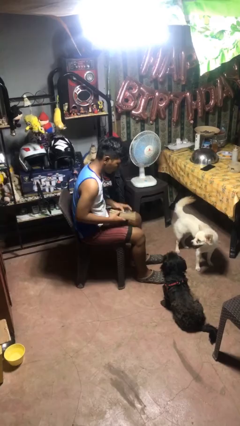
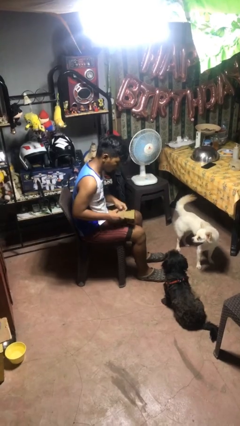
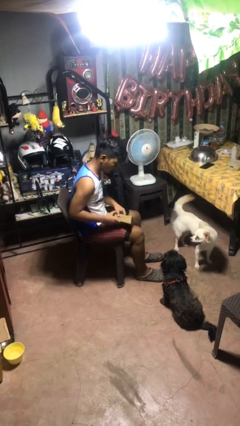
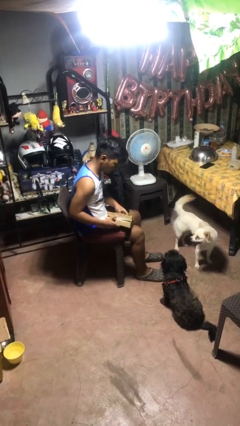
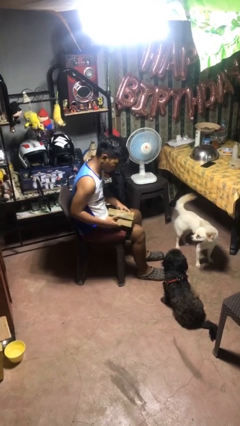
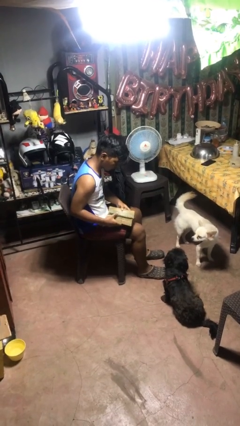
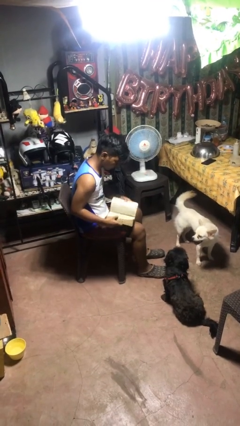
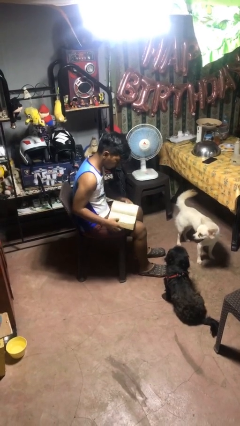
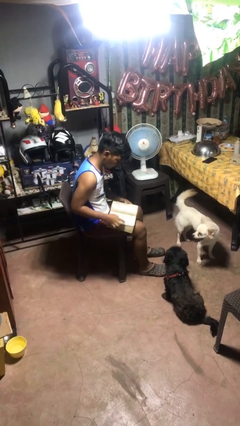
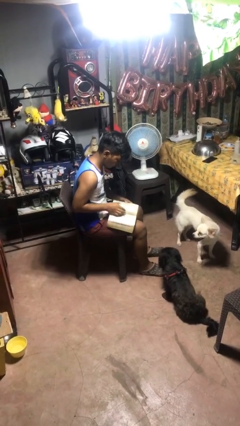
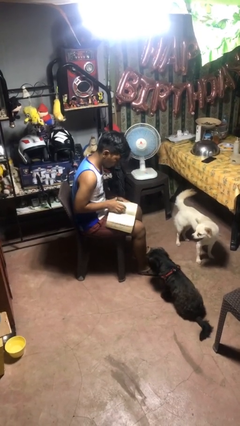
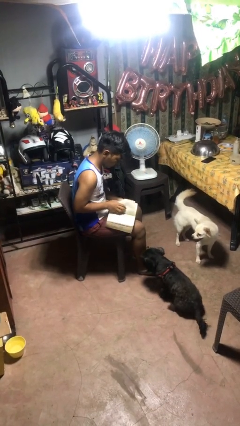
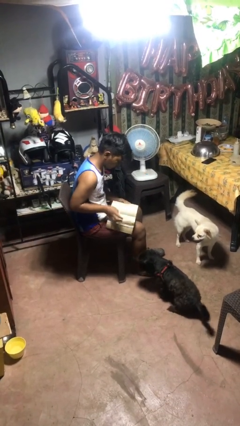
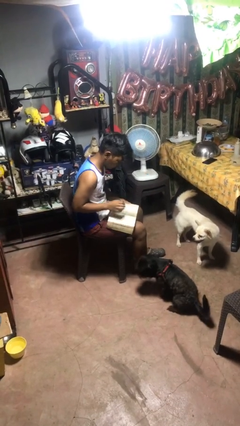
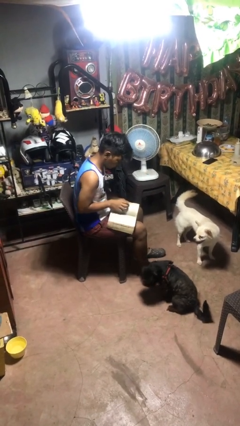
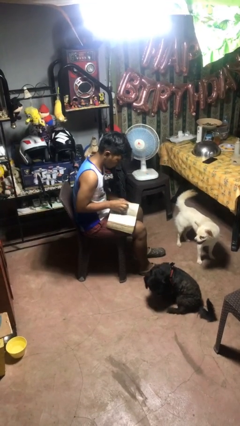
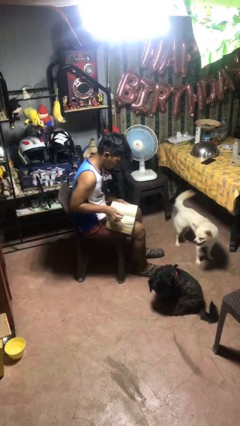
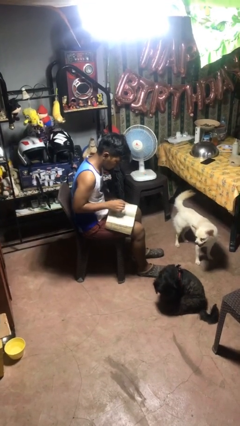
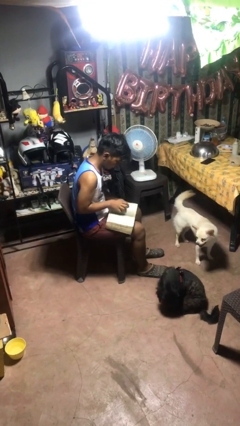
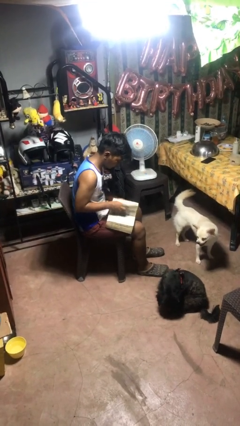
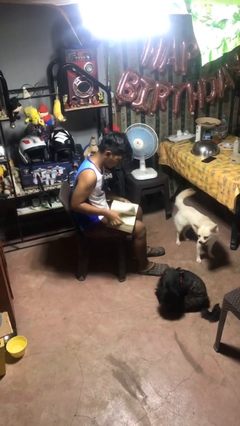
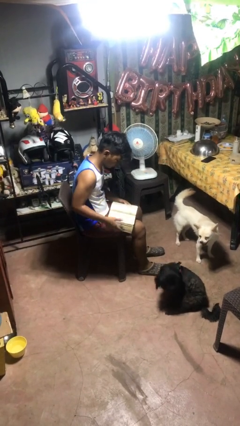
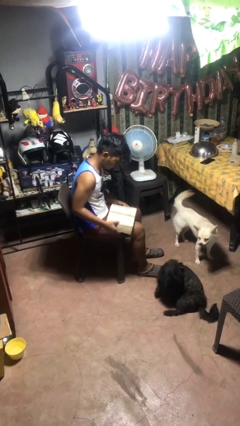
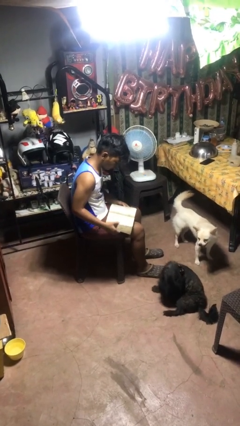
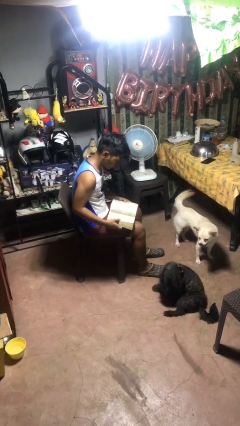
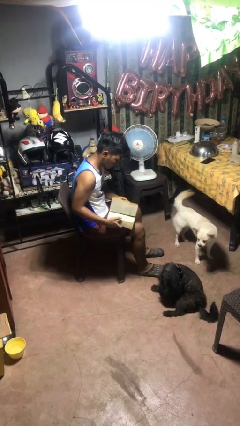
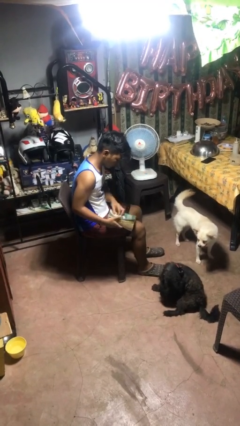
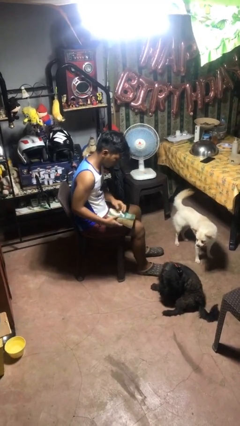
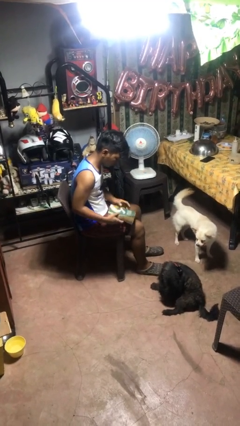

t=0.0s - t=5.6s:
person reads book

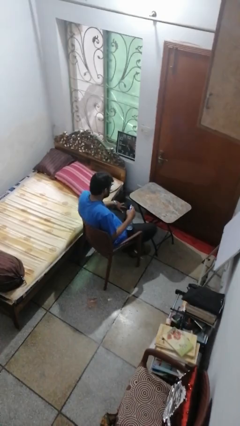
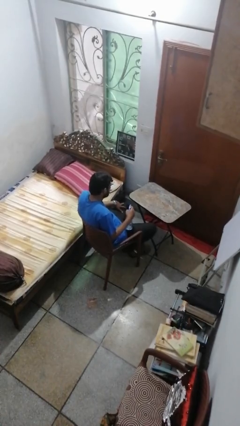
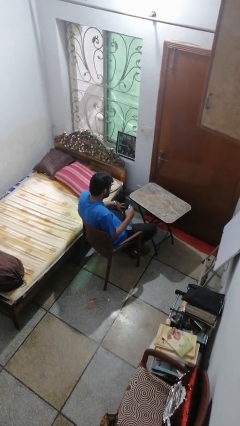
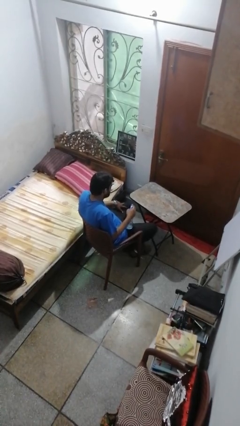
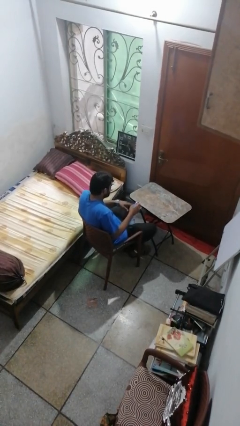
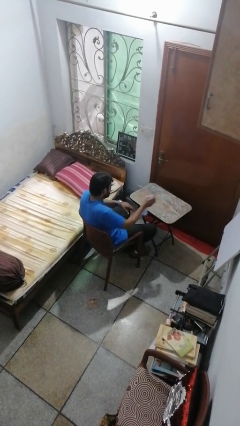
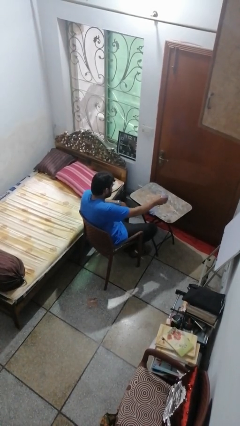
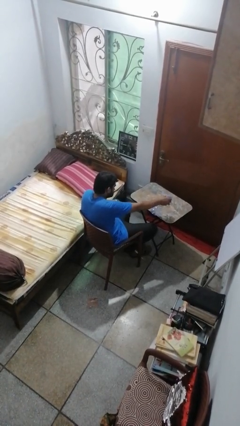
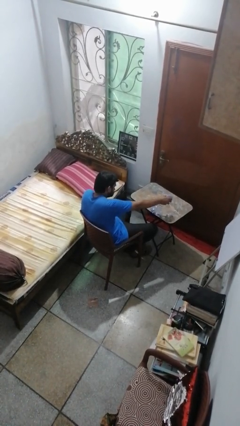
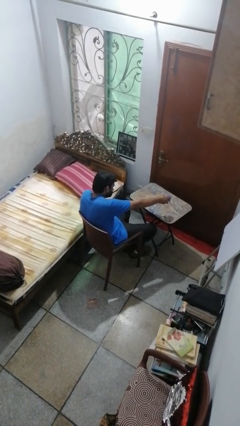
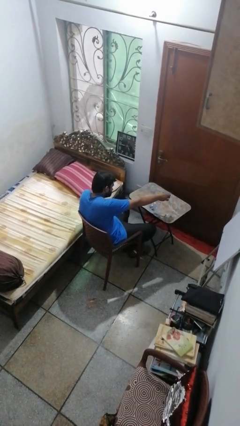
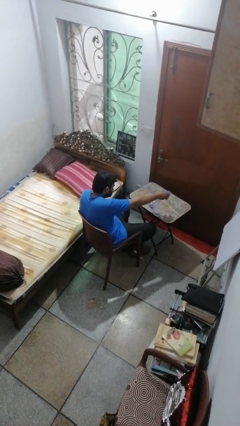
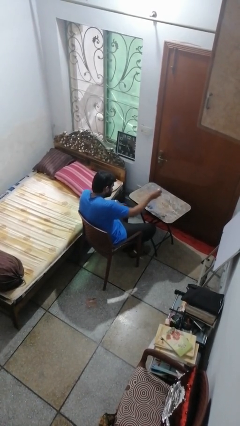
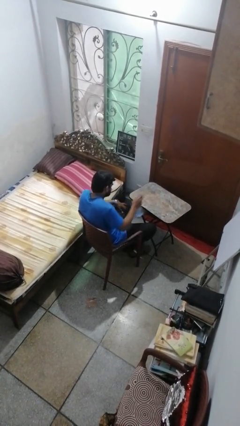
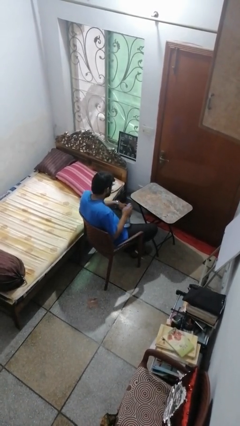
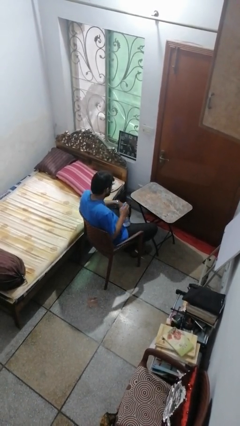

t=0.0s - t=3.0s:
person sprays from bottle

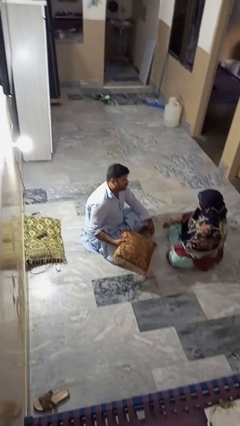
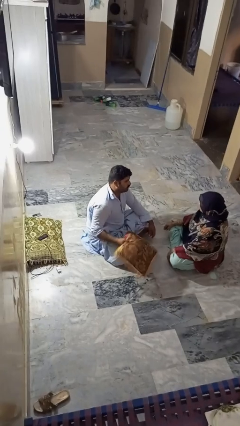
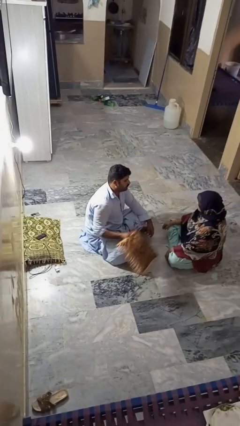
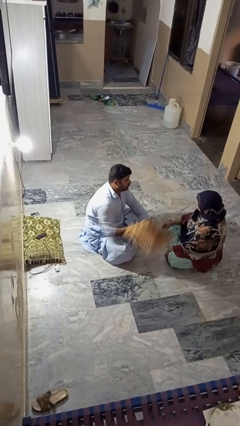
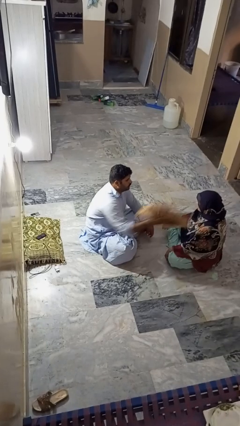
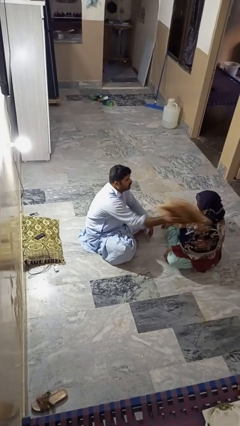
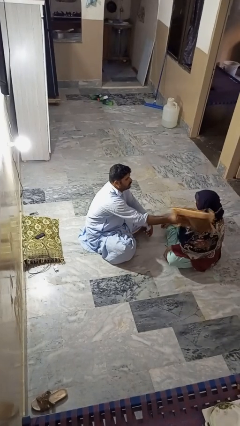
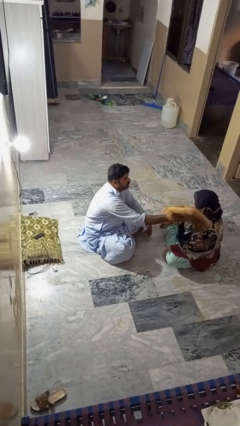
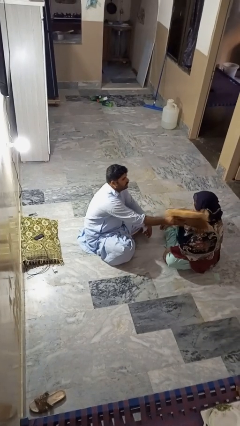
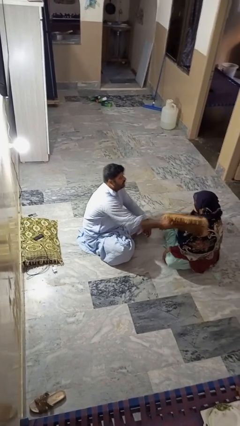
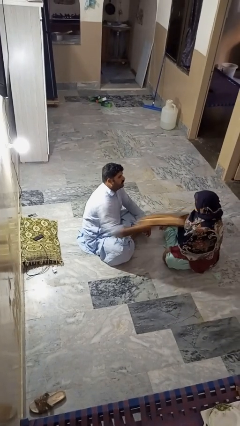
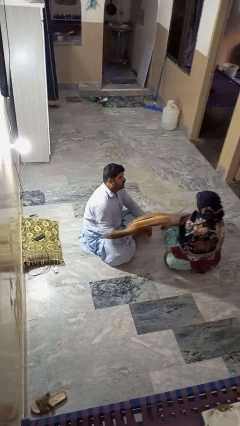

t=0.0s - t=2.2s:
person hits person with pillow

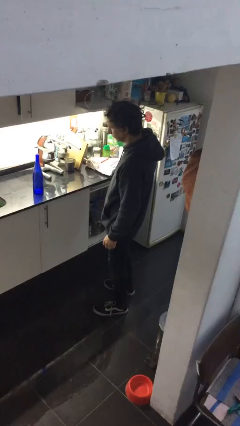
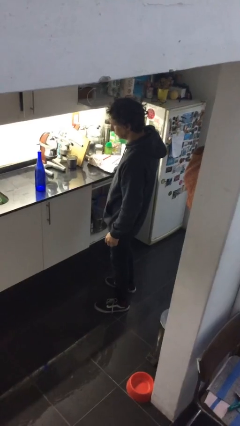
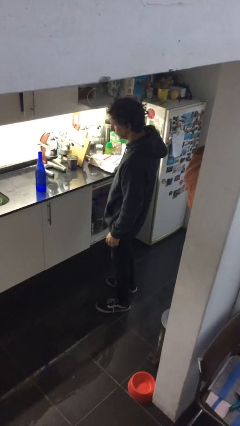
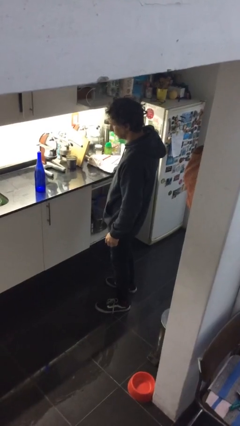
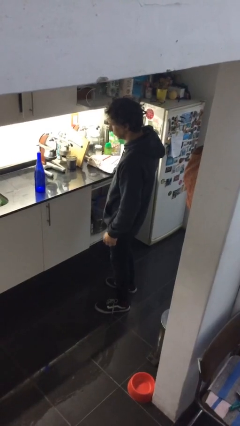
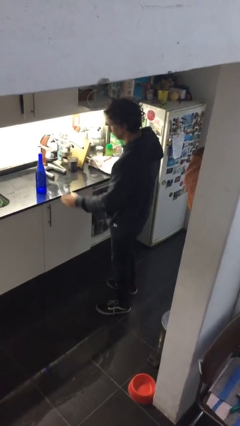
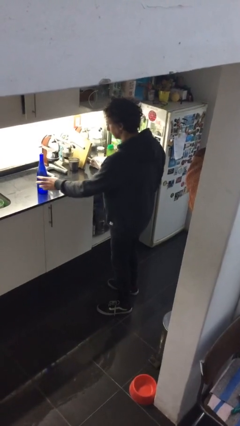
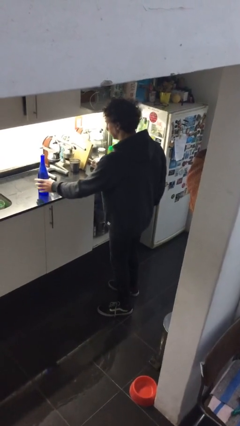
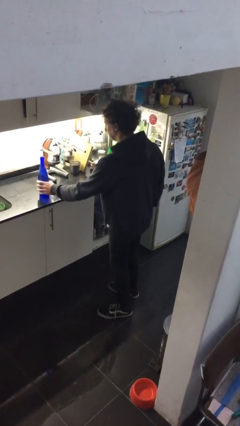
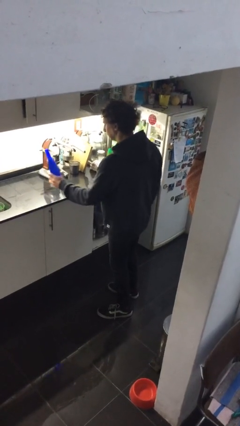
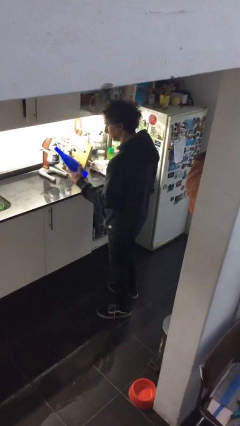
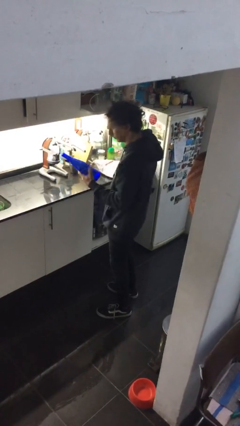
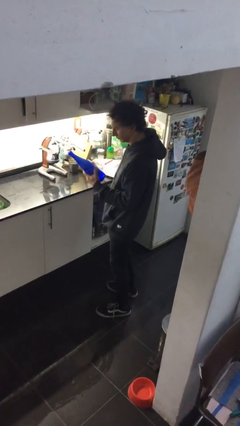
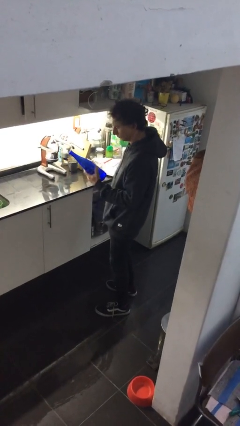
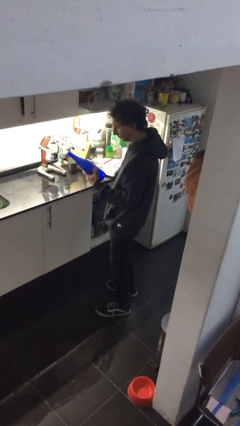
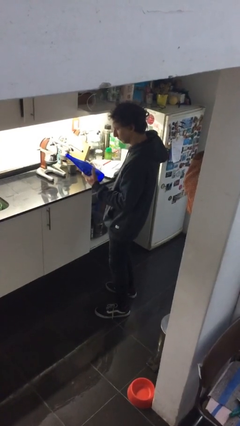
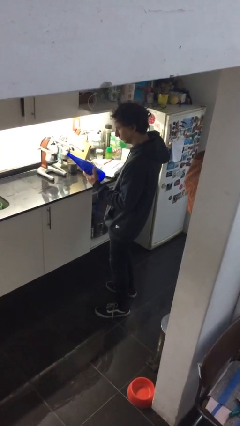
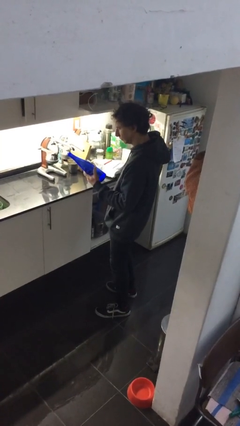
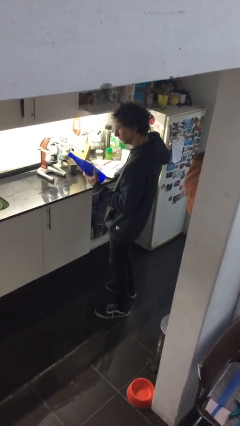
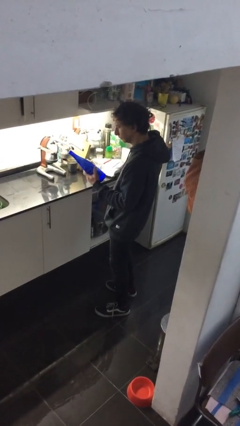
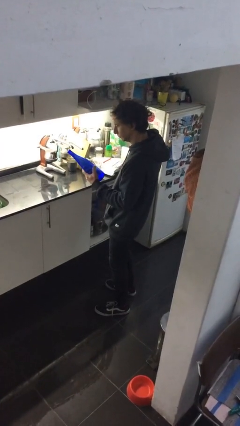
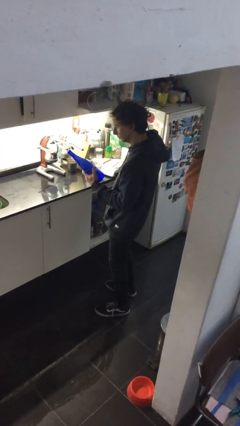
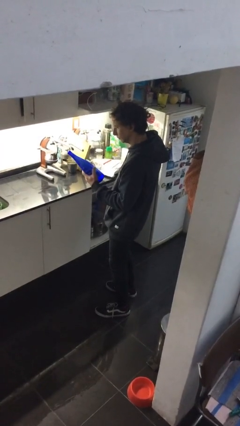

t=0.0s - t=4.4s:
person picks up object from countertop

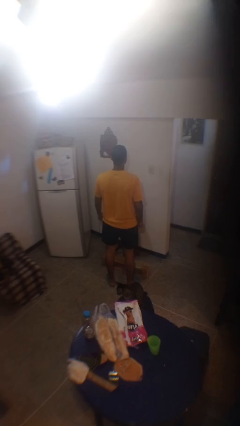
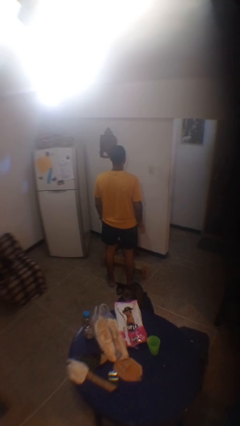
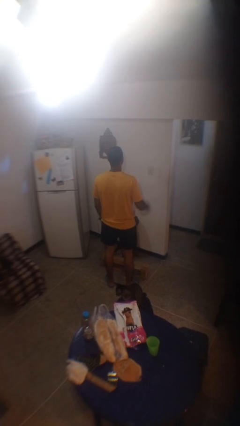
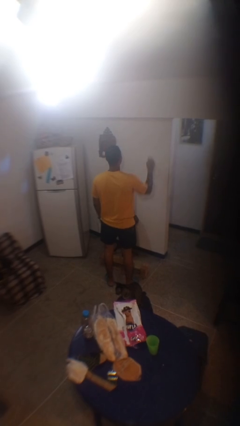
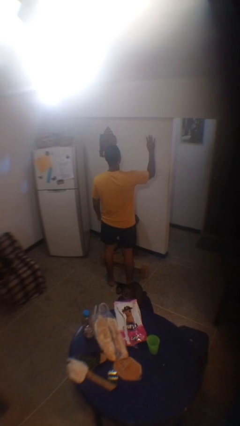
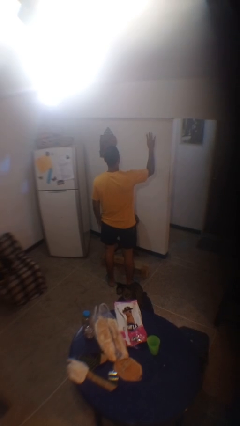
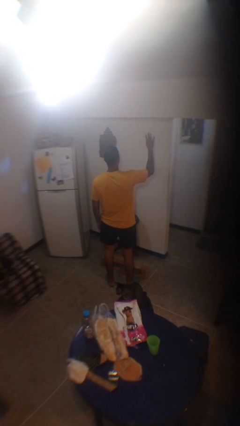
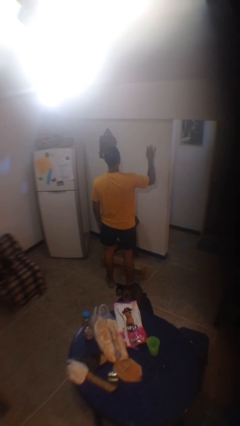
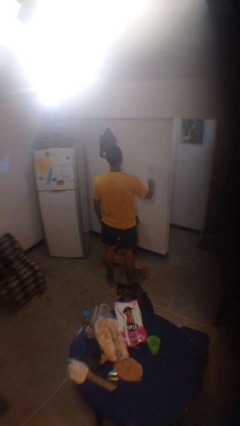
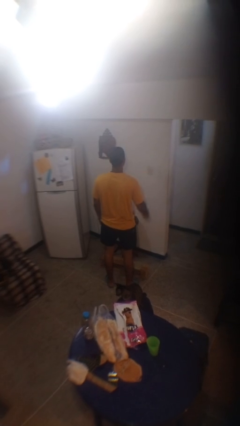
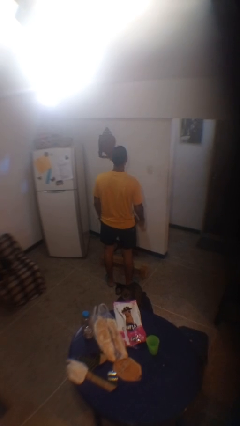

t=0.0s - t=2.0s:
person gestures number four

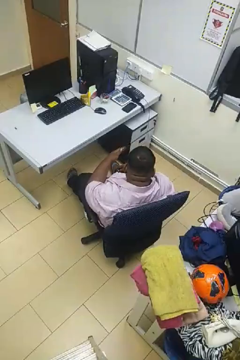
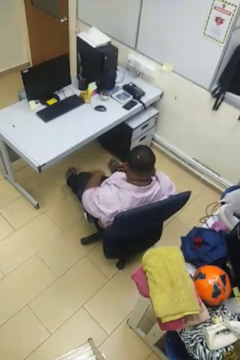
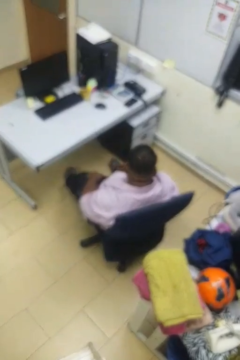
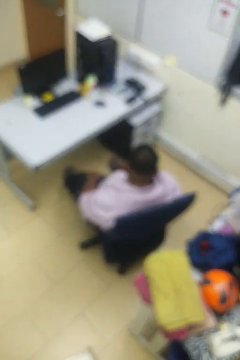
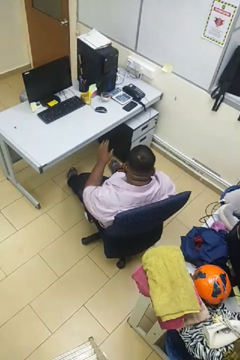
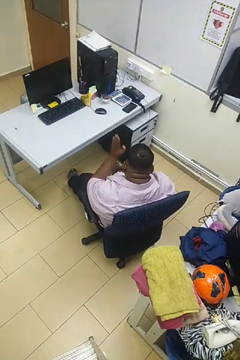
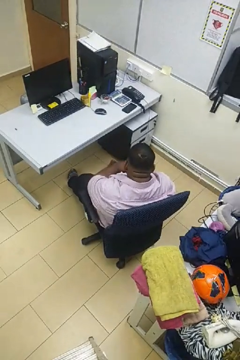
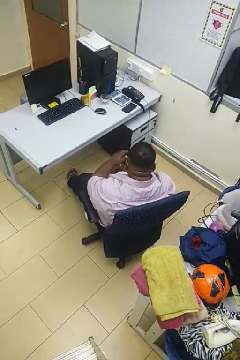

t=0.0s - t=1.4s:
person swats bug
